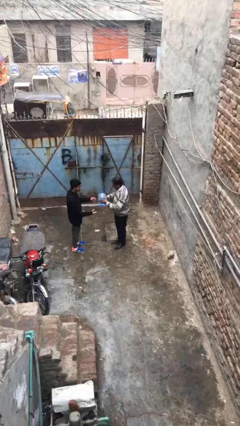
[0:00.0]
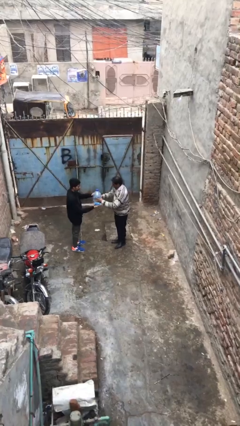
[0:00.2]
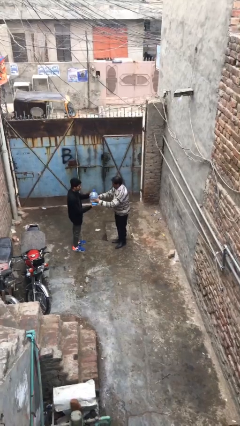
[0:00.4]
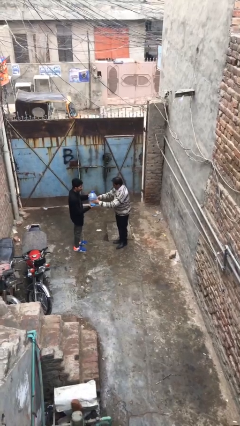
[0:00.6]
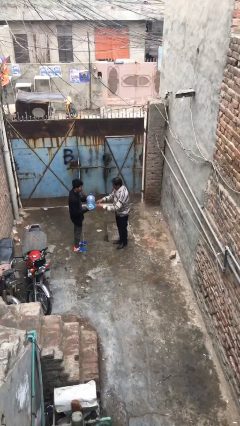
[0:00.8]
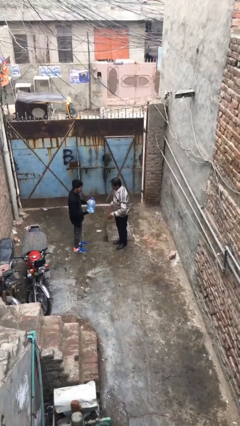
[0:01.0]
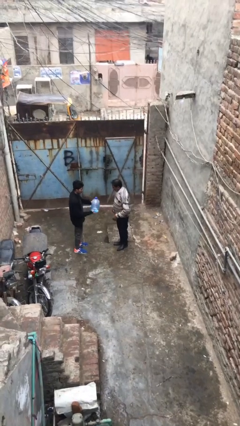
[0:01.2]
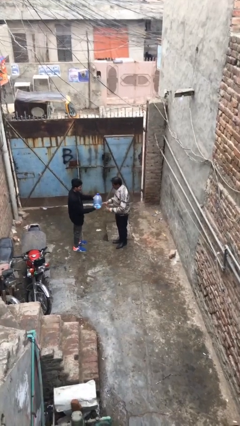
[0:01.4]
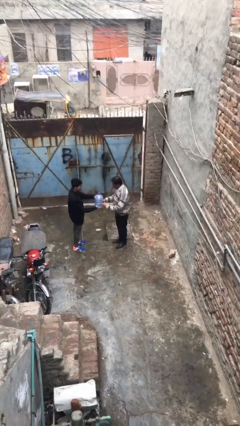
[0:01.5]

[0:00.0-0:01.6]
person transfers object to person

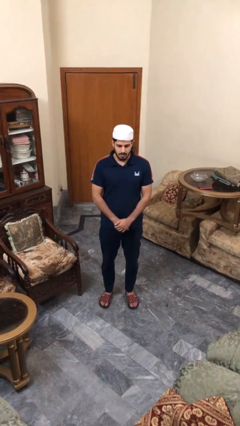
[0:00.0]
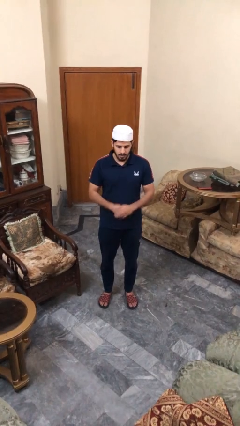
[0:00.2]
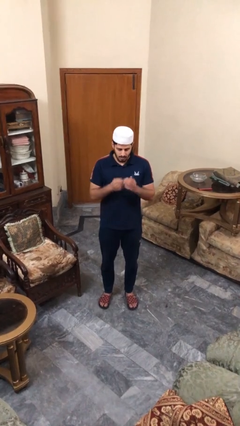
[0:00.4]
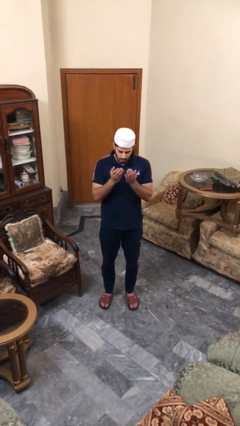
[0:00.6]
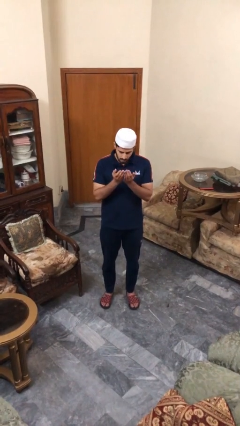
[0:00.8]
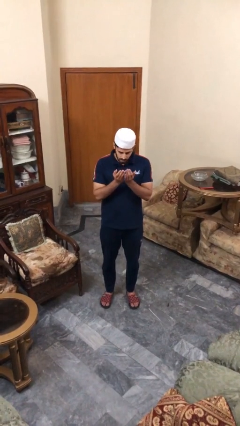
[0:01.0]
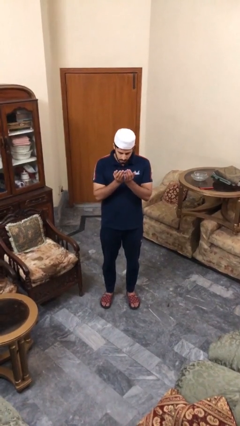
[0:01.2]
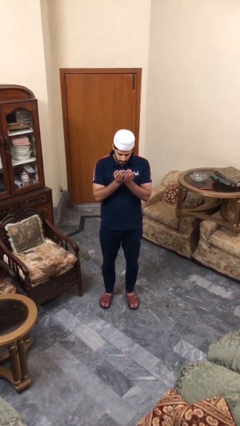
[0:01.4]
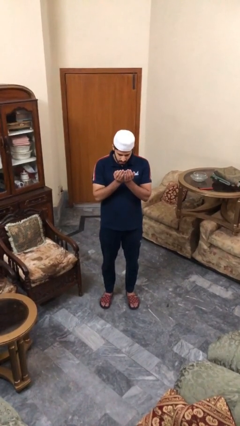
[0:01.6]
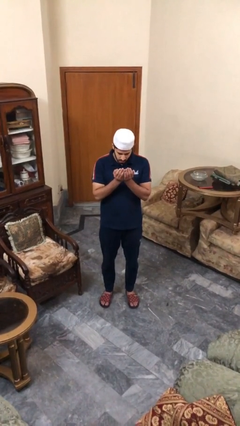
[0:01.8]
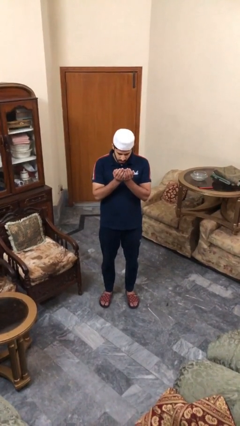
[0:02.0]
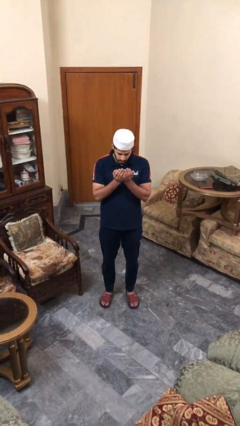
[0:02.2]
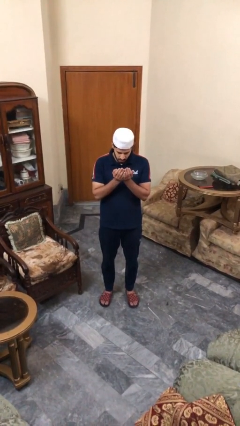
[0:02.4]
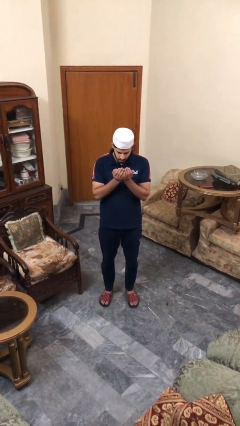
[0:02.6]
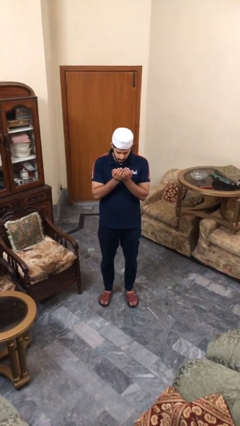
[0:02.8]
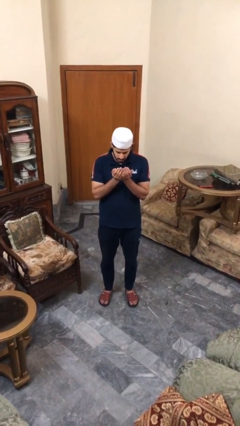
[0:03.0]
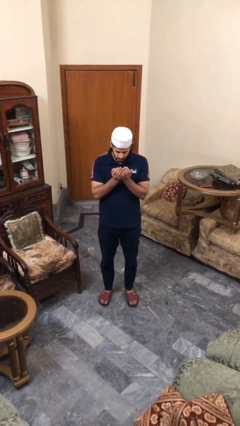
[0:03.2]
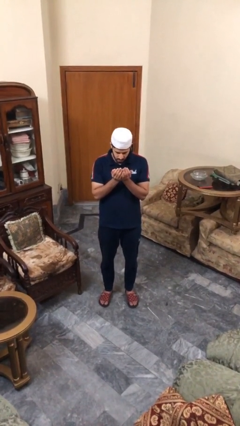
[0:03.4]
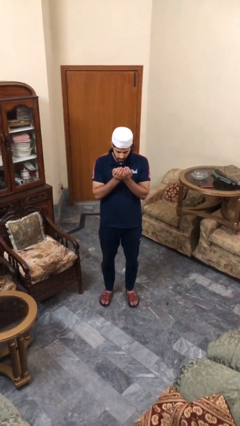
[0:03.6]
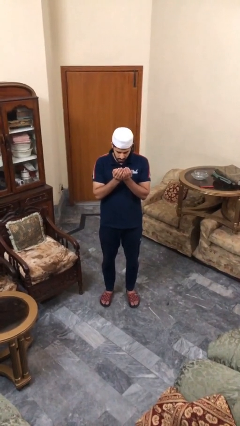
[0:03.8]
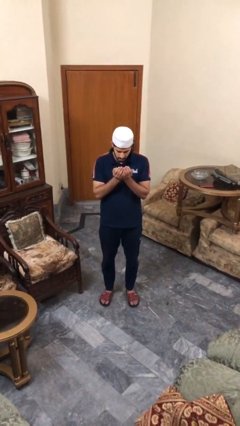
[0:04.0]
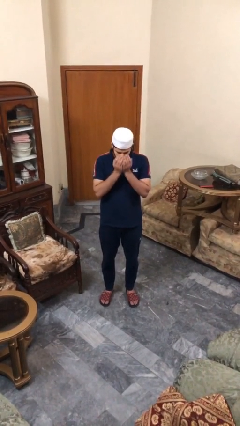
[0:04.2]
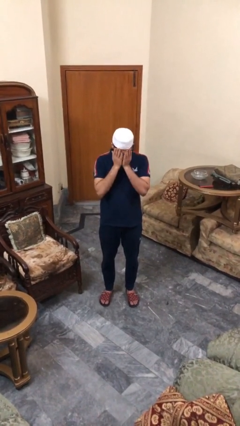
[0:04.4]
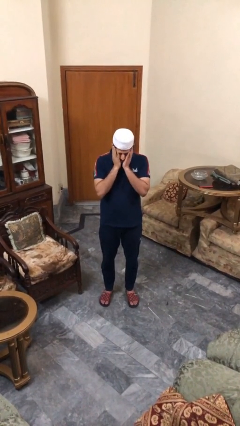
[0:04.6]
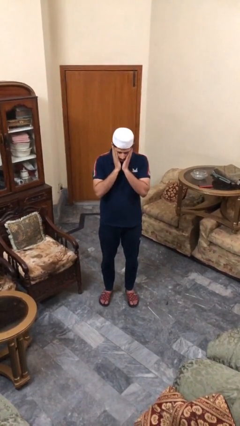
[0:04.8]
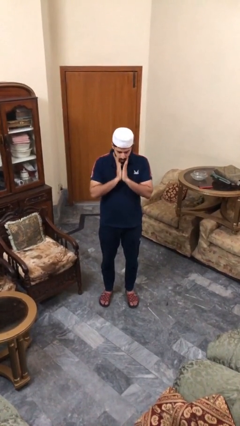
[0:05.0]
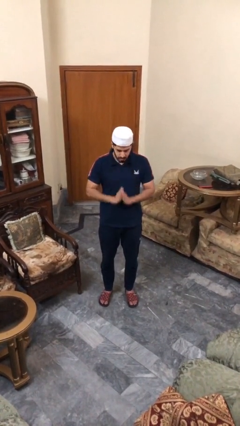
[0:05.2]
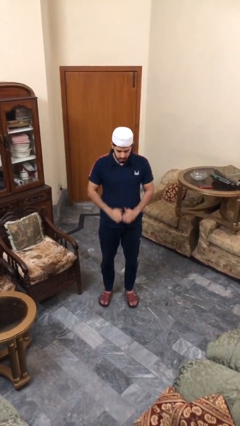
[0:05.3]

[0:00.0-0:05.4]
person prays

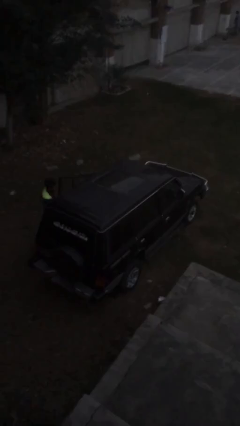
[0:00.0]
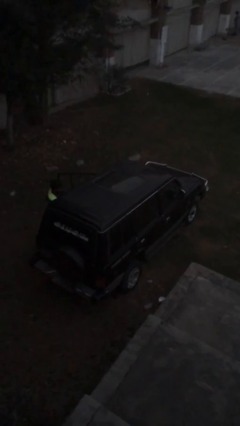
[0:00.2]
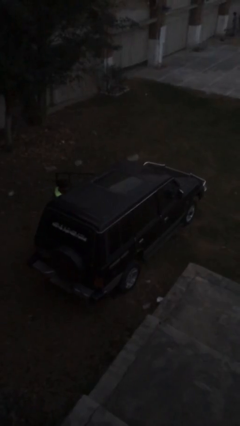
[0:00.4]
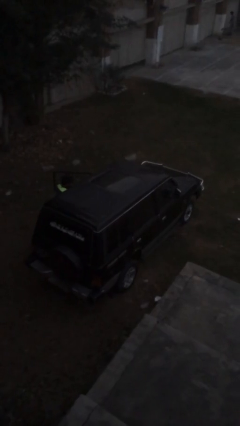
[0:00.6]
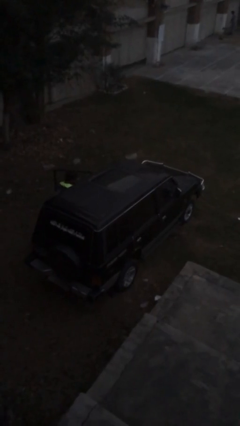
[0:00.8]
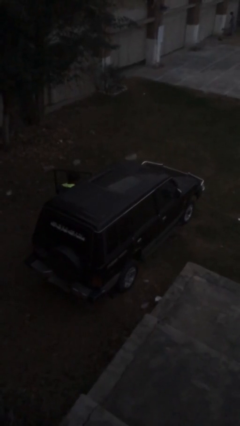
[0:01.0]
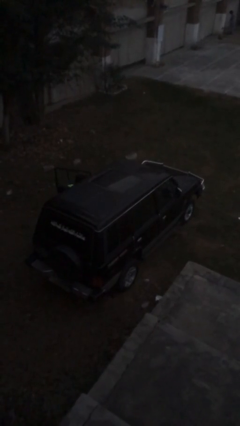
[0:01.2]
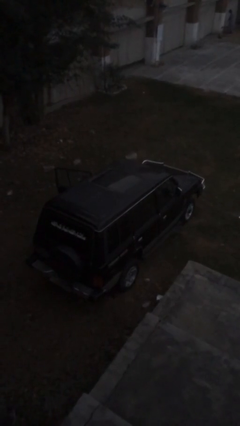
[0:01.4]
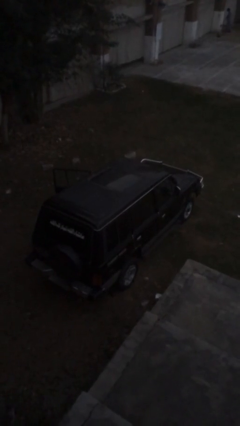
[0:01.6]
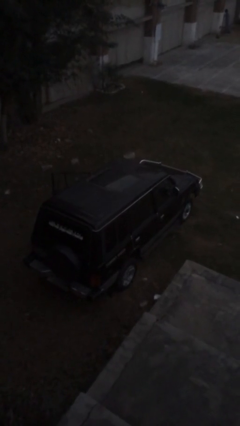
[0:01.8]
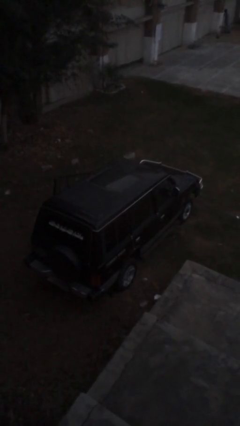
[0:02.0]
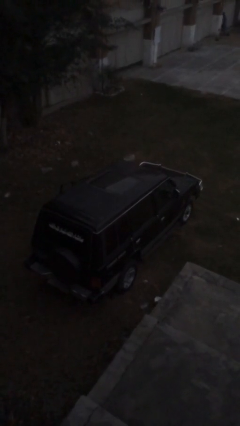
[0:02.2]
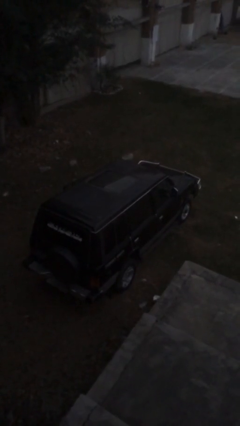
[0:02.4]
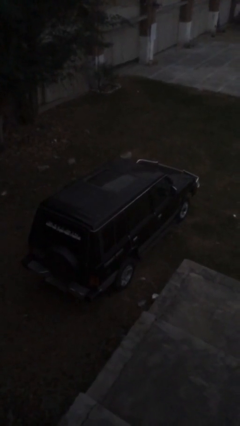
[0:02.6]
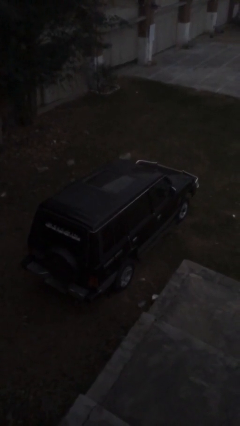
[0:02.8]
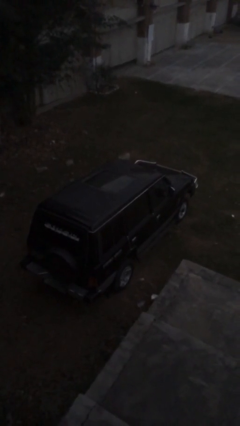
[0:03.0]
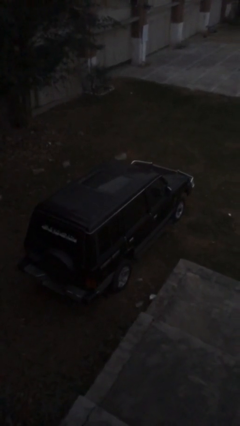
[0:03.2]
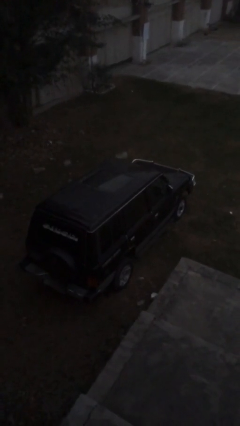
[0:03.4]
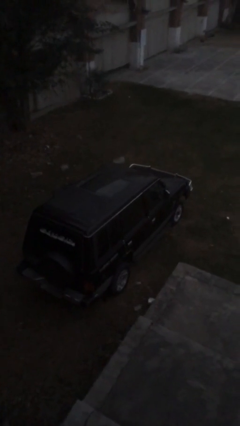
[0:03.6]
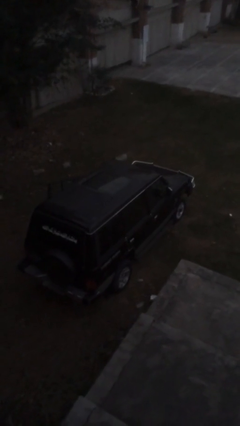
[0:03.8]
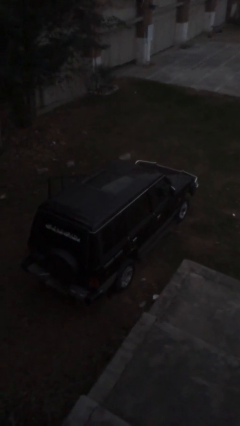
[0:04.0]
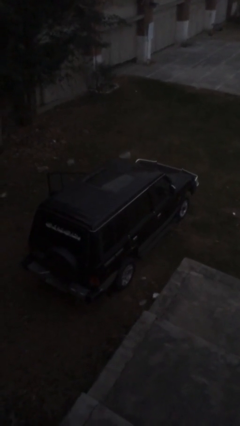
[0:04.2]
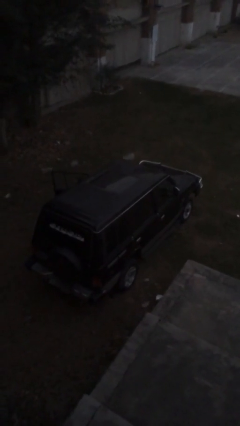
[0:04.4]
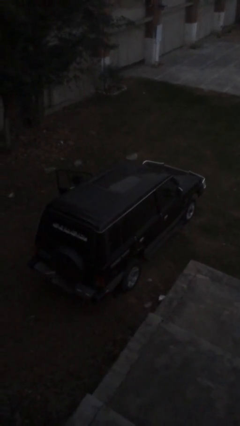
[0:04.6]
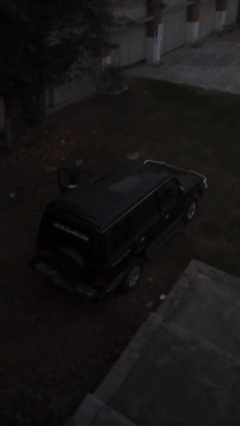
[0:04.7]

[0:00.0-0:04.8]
car picks up person

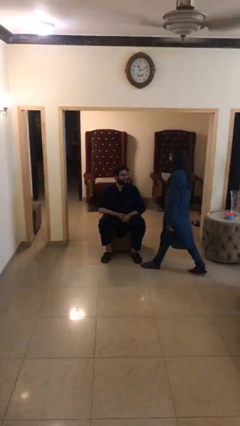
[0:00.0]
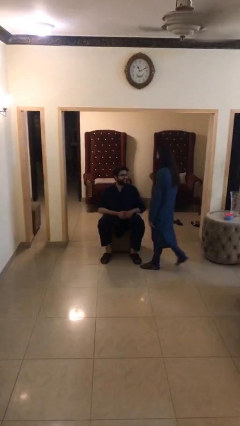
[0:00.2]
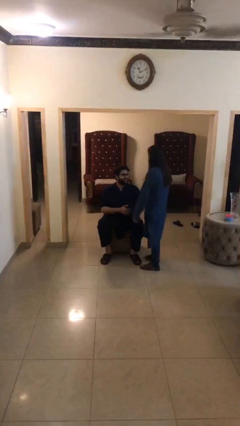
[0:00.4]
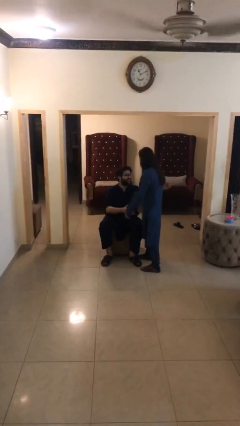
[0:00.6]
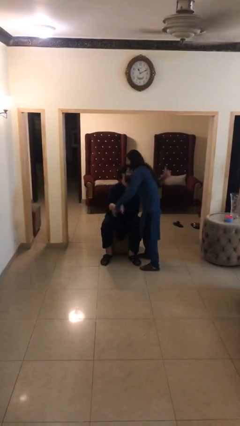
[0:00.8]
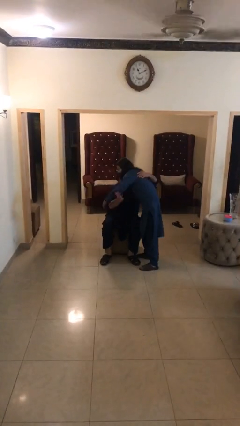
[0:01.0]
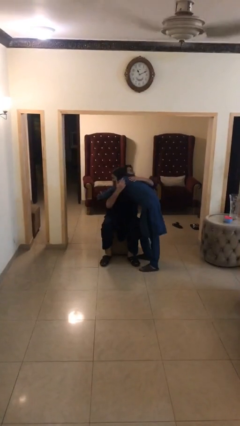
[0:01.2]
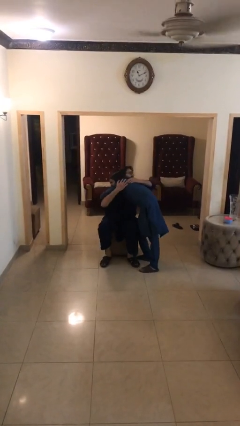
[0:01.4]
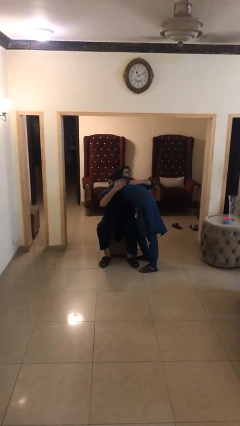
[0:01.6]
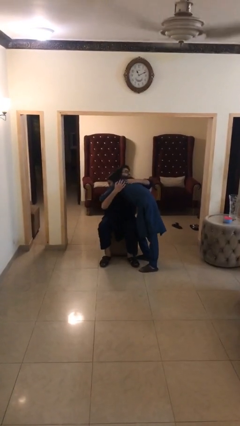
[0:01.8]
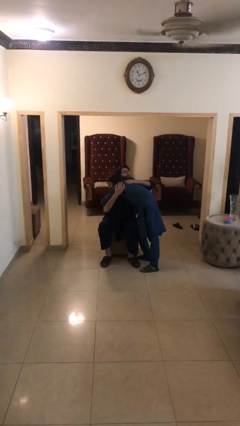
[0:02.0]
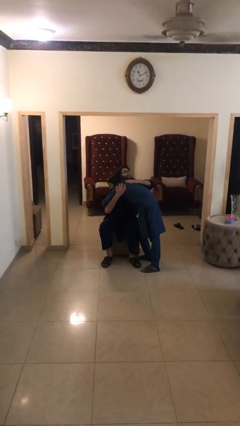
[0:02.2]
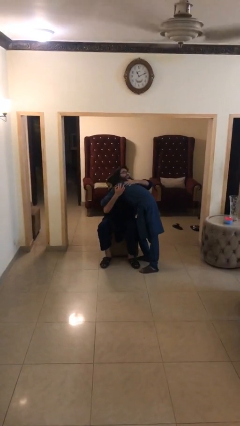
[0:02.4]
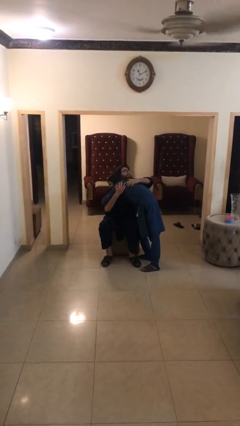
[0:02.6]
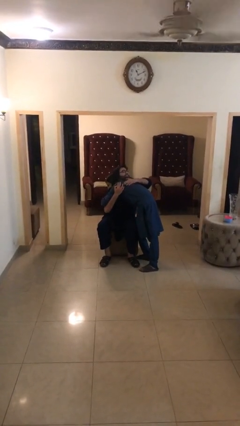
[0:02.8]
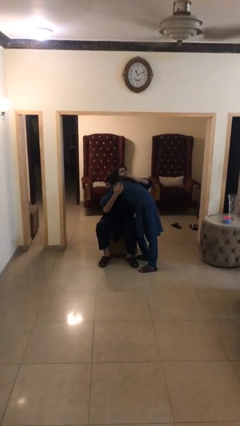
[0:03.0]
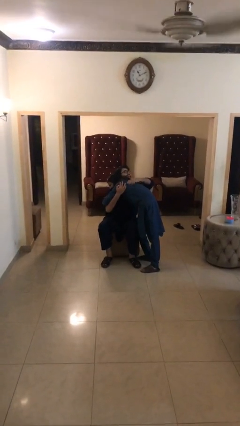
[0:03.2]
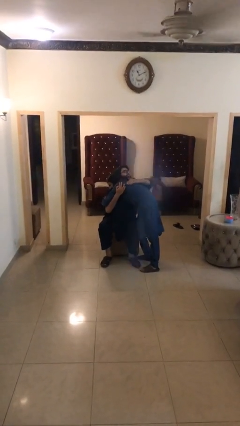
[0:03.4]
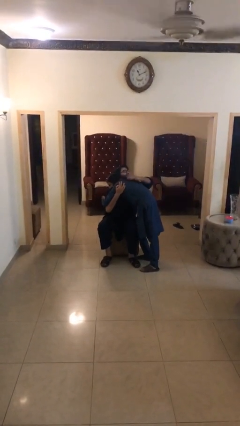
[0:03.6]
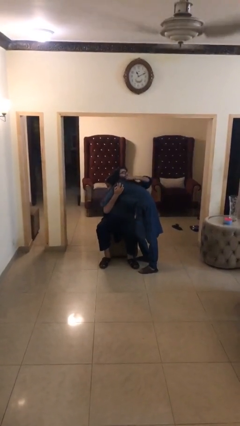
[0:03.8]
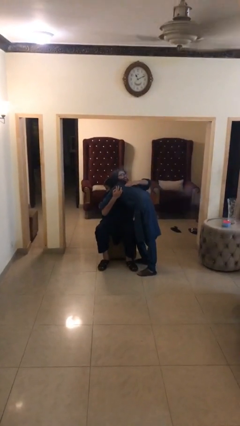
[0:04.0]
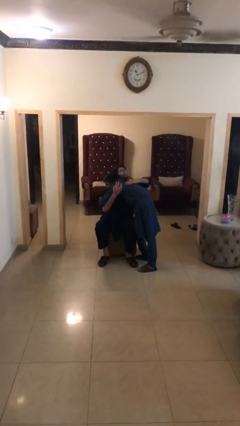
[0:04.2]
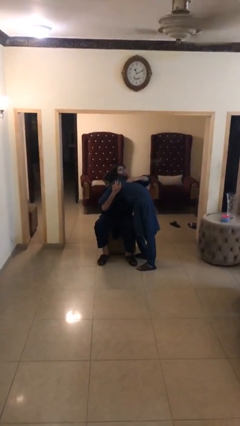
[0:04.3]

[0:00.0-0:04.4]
person embraces person

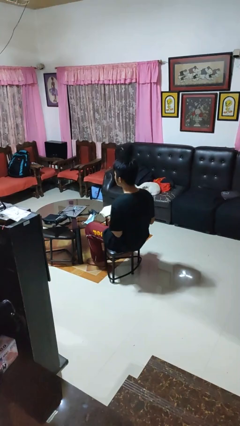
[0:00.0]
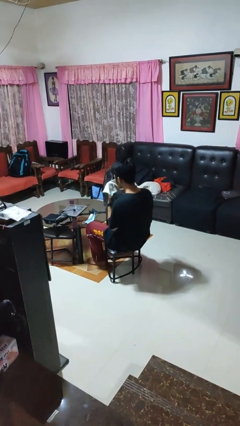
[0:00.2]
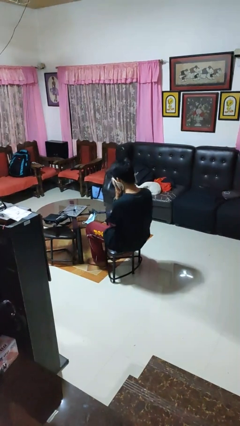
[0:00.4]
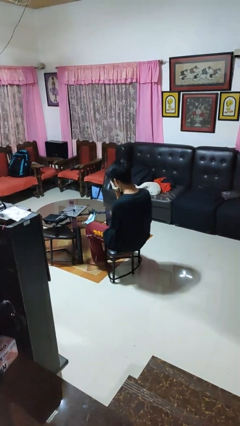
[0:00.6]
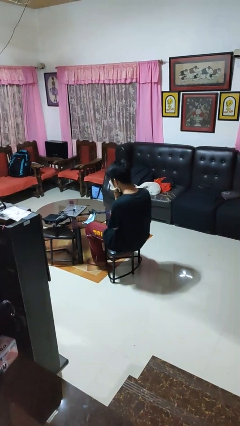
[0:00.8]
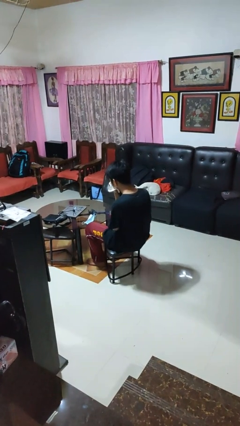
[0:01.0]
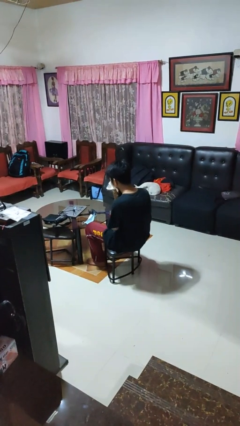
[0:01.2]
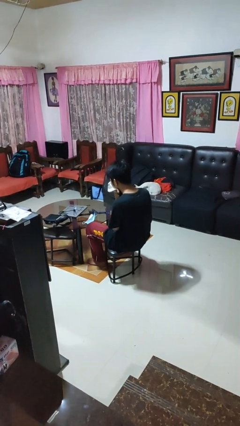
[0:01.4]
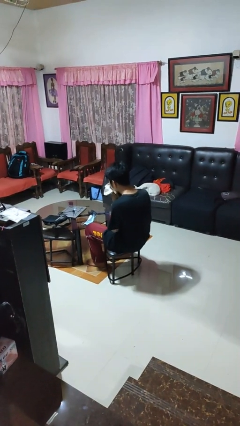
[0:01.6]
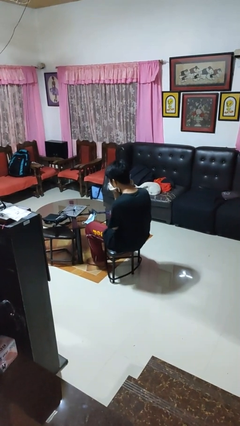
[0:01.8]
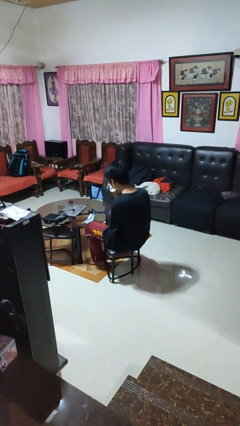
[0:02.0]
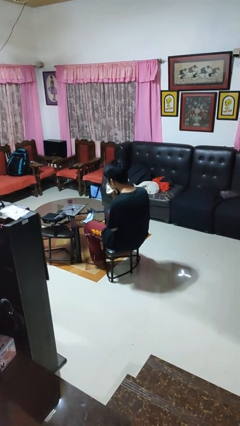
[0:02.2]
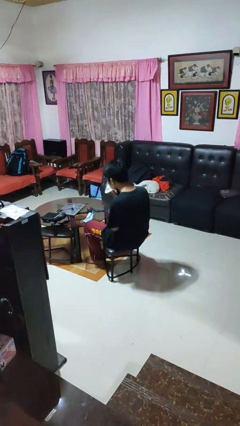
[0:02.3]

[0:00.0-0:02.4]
person wipes mouth with napkin
